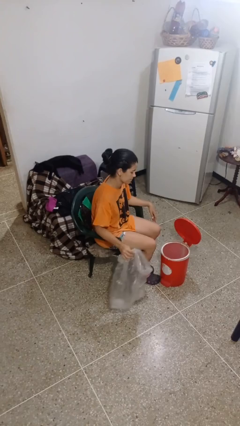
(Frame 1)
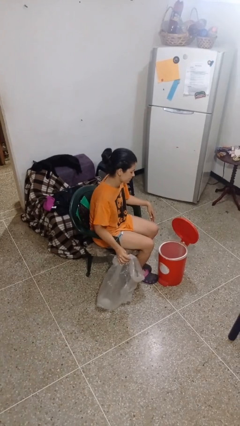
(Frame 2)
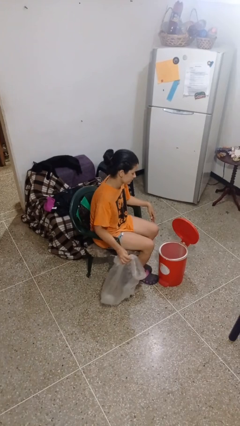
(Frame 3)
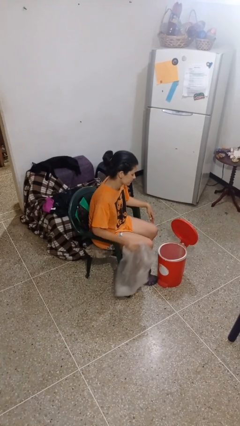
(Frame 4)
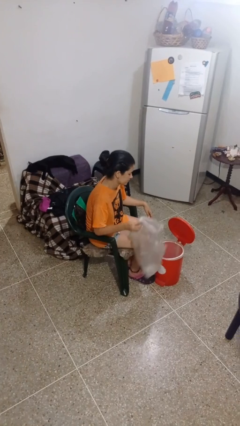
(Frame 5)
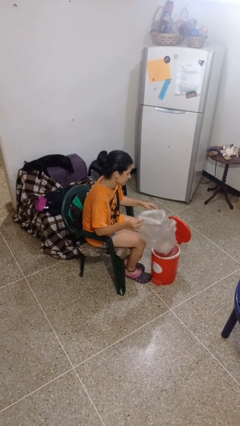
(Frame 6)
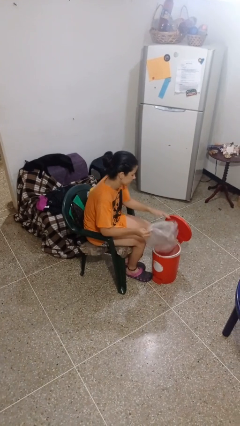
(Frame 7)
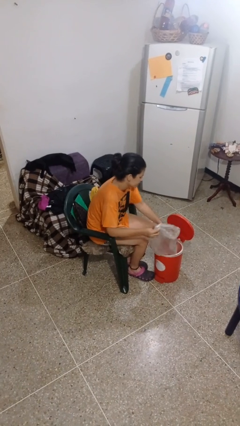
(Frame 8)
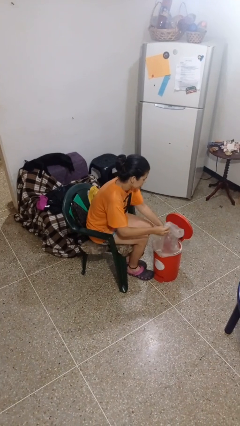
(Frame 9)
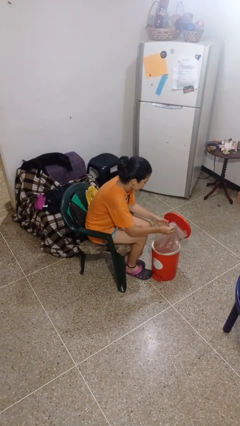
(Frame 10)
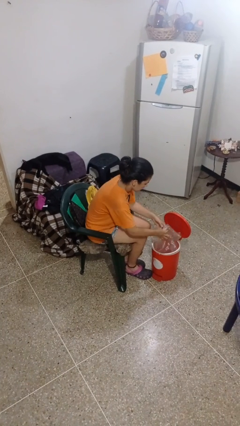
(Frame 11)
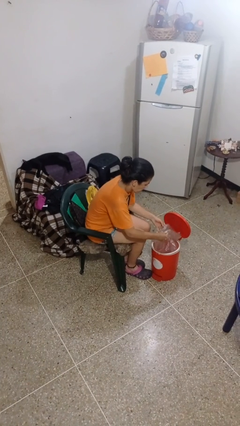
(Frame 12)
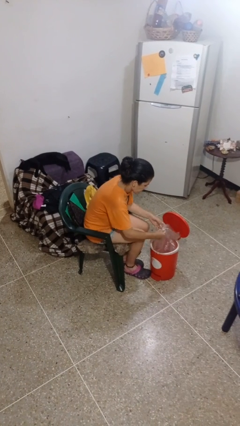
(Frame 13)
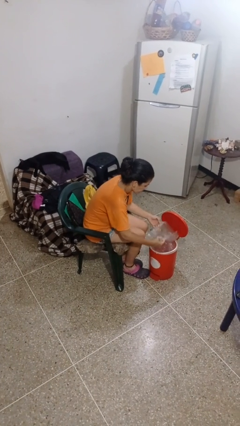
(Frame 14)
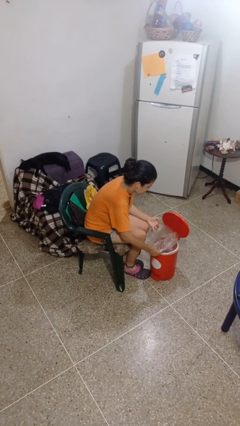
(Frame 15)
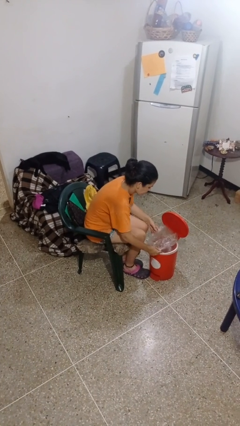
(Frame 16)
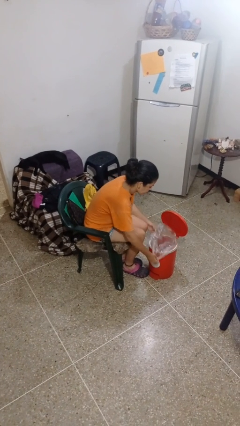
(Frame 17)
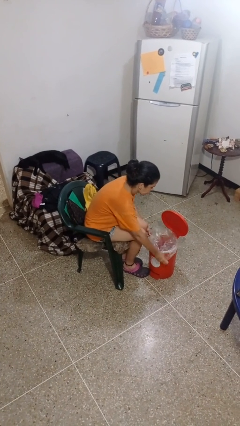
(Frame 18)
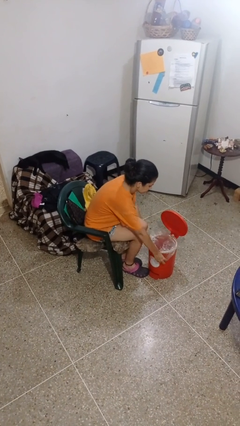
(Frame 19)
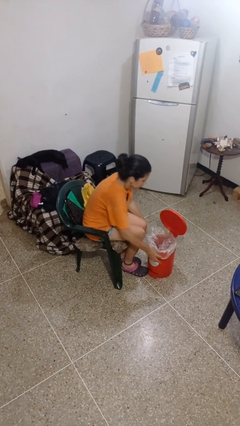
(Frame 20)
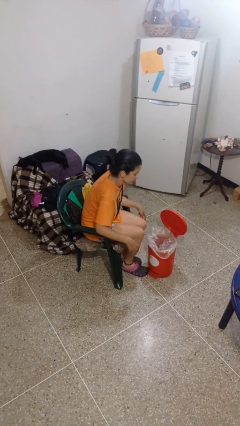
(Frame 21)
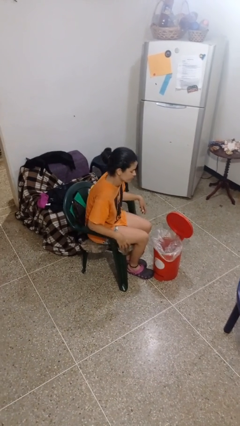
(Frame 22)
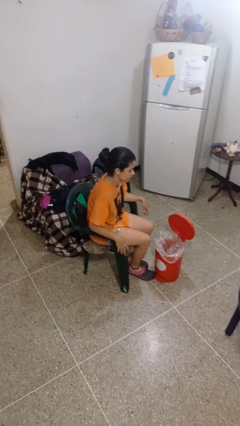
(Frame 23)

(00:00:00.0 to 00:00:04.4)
person inserts trashbag into trashcan

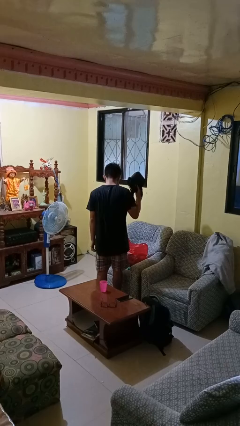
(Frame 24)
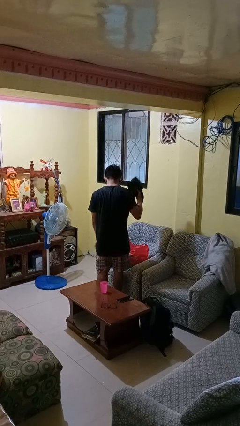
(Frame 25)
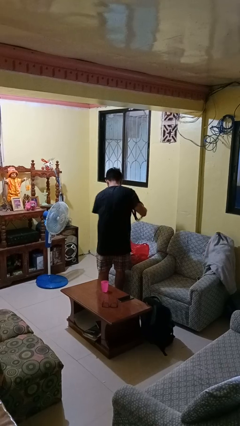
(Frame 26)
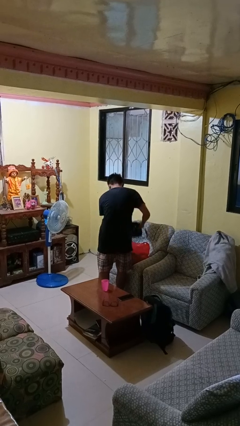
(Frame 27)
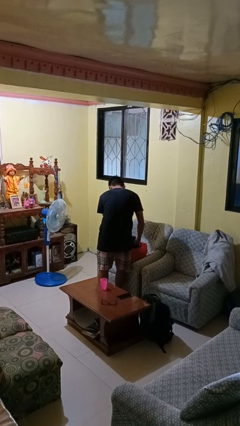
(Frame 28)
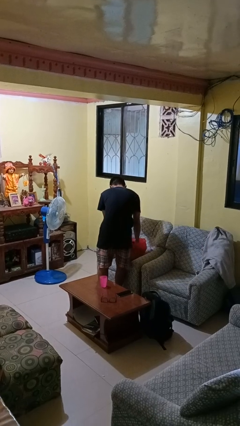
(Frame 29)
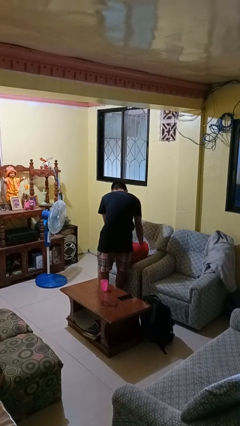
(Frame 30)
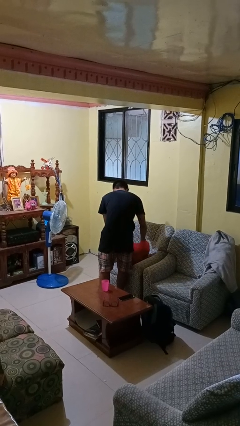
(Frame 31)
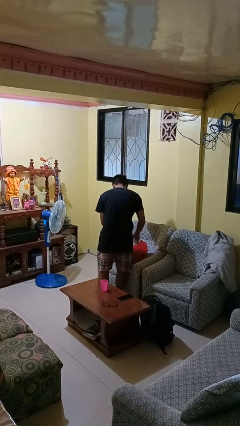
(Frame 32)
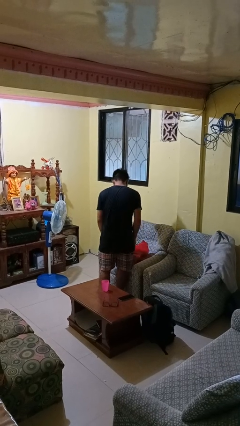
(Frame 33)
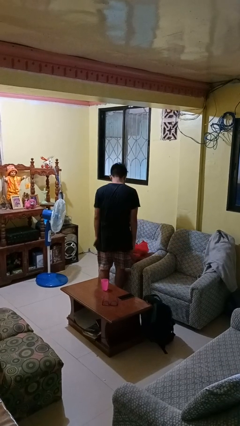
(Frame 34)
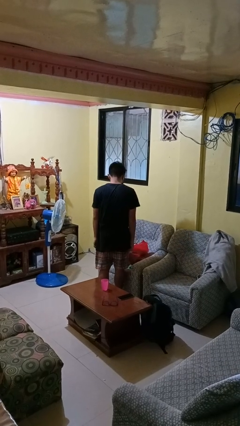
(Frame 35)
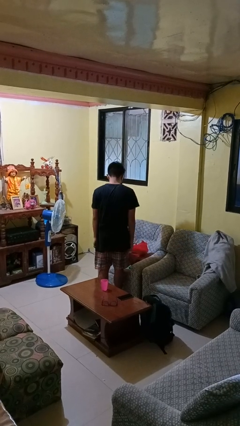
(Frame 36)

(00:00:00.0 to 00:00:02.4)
person puts object into bag

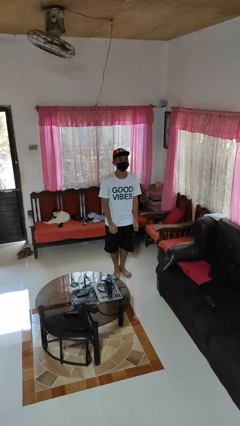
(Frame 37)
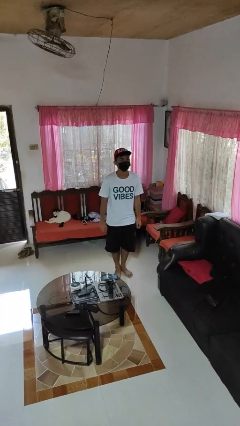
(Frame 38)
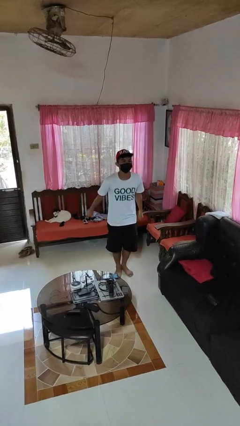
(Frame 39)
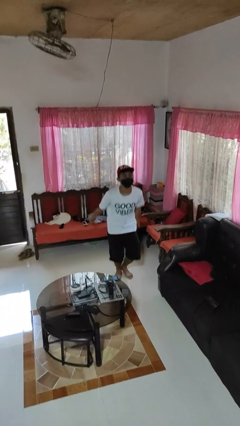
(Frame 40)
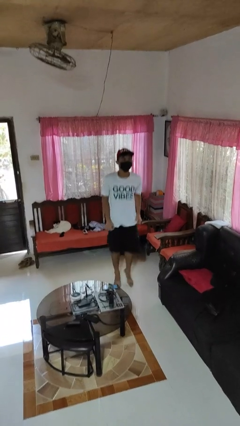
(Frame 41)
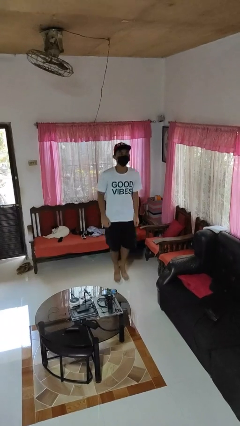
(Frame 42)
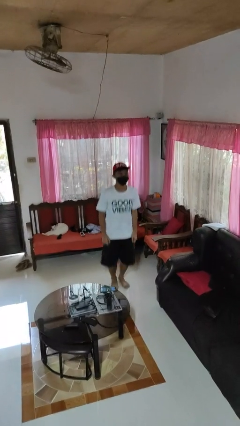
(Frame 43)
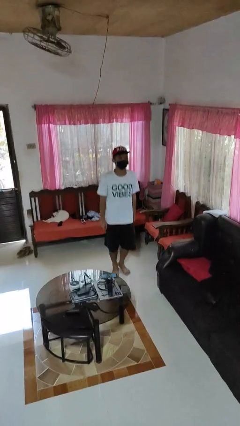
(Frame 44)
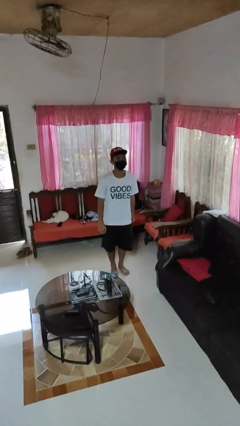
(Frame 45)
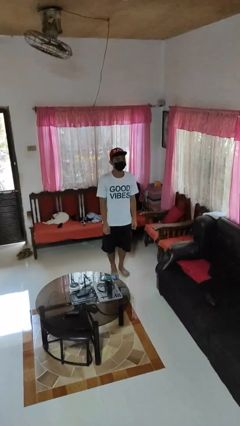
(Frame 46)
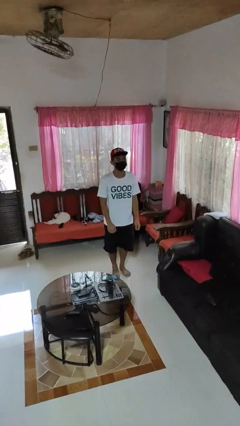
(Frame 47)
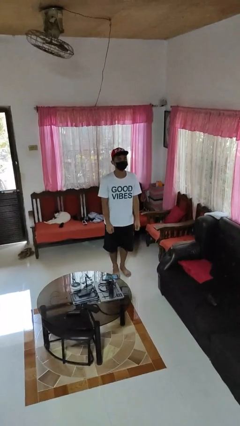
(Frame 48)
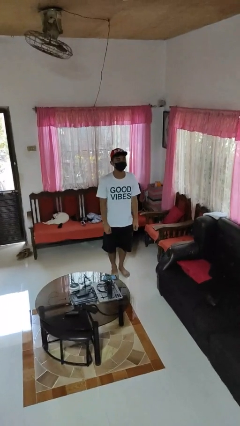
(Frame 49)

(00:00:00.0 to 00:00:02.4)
person jumps

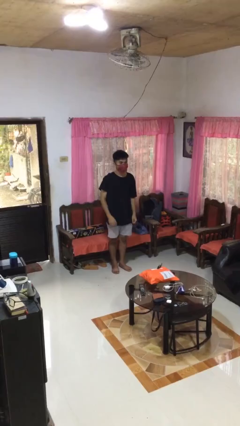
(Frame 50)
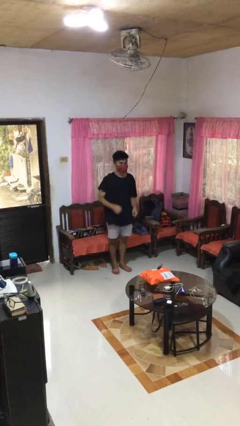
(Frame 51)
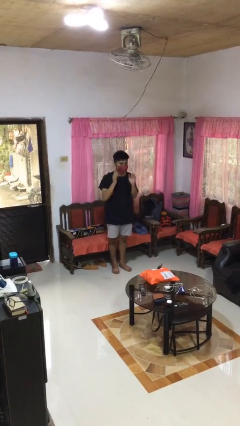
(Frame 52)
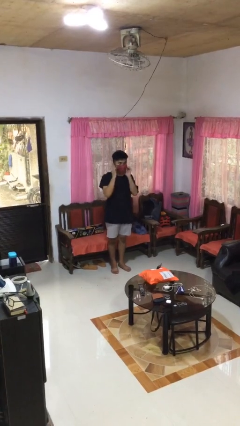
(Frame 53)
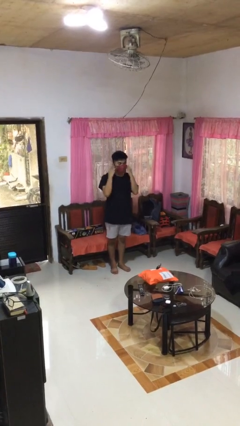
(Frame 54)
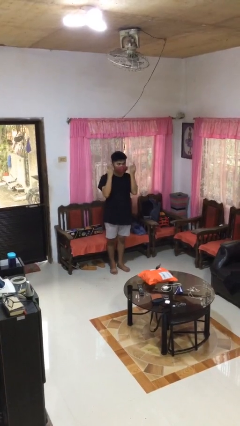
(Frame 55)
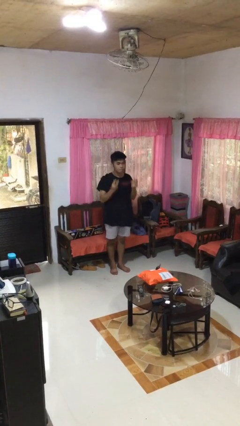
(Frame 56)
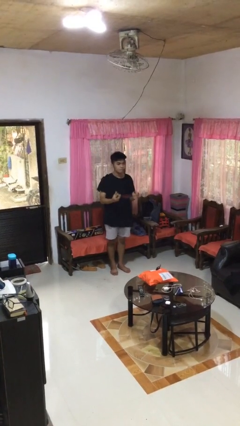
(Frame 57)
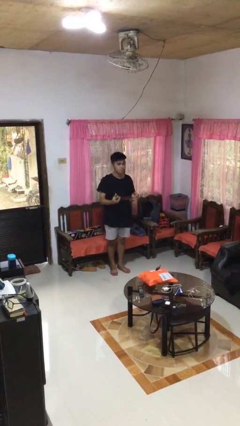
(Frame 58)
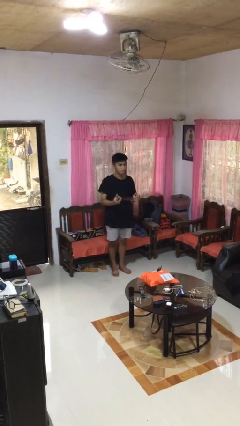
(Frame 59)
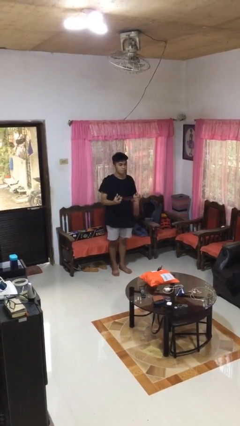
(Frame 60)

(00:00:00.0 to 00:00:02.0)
person takes off facemask

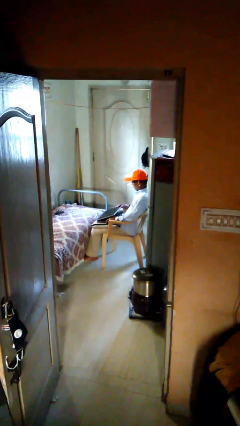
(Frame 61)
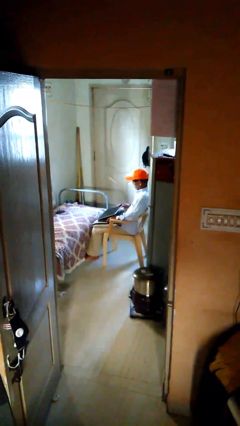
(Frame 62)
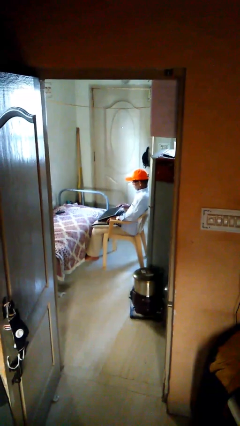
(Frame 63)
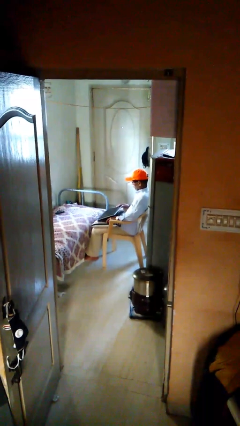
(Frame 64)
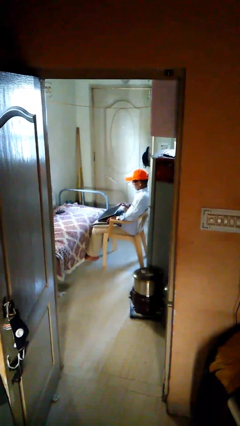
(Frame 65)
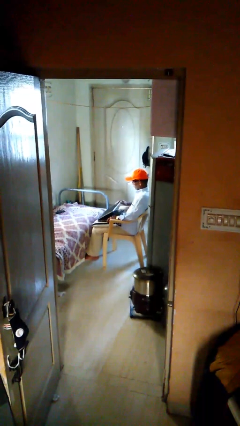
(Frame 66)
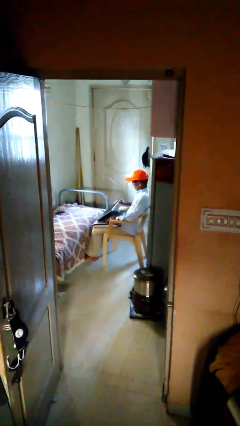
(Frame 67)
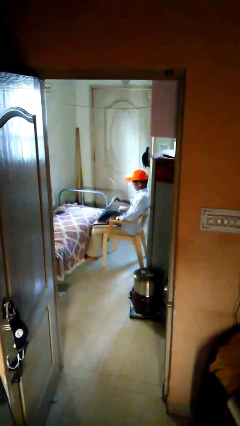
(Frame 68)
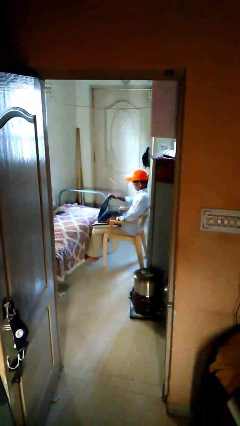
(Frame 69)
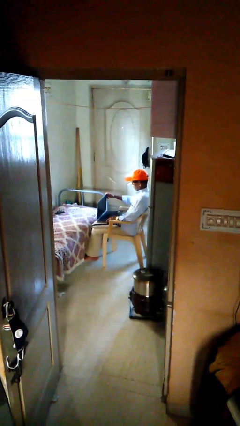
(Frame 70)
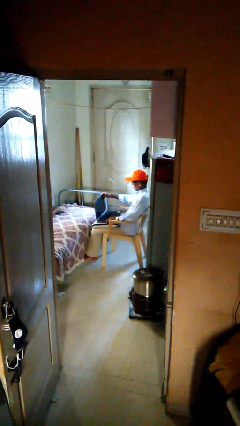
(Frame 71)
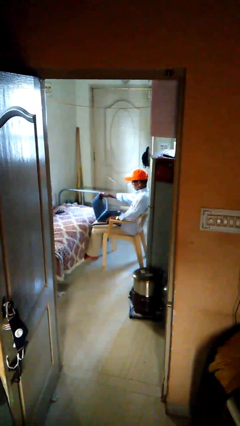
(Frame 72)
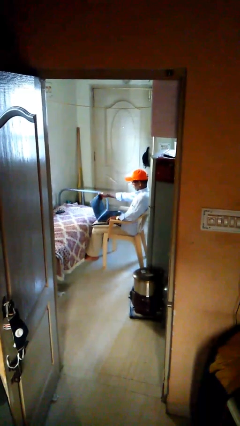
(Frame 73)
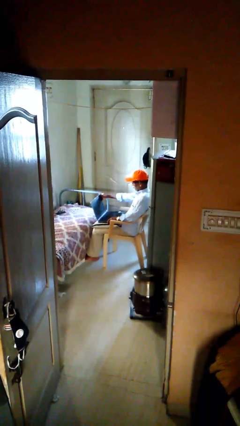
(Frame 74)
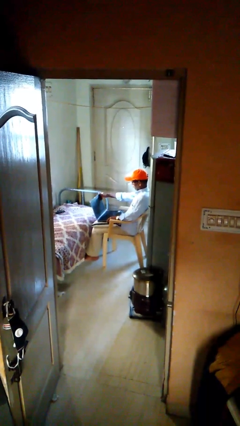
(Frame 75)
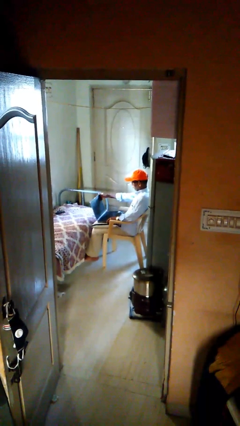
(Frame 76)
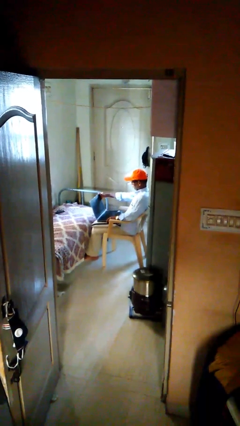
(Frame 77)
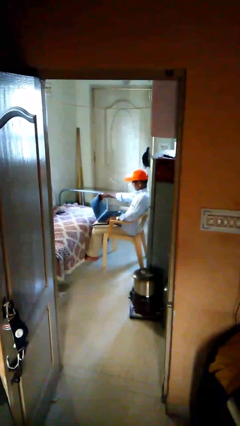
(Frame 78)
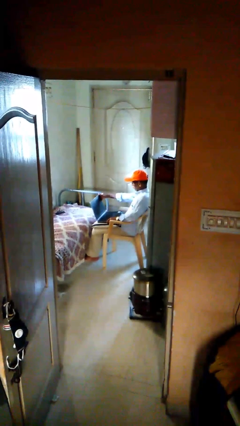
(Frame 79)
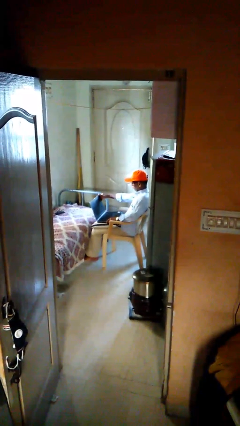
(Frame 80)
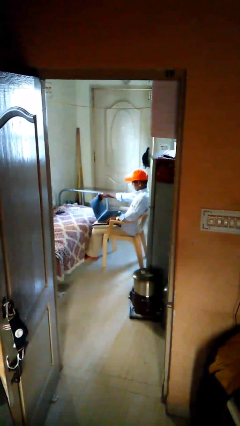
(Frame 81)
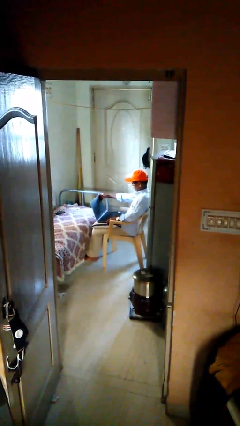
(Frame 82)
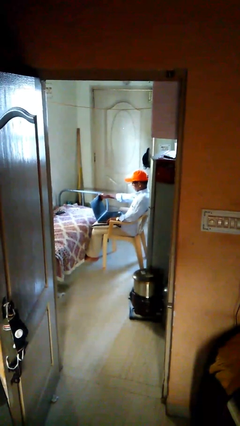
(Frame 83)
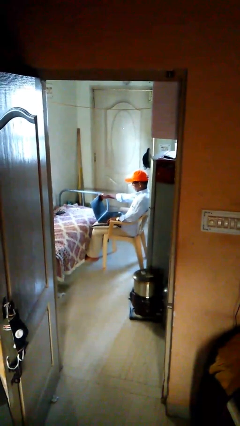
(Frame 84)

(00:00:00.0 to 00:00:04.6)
person interacts with laptop

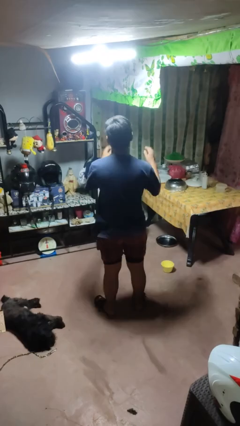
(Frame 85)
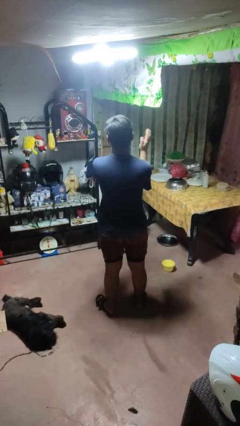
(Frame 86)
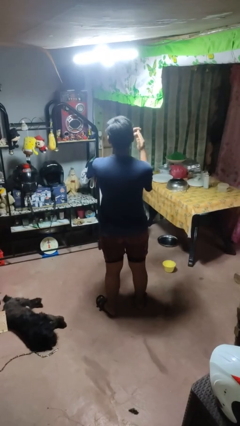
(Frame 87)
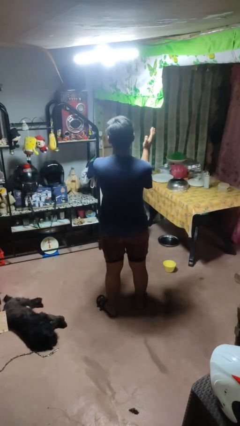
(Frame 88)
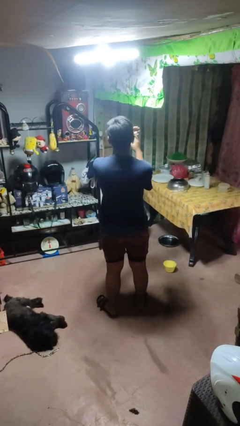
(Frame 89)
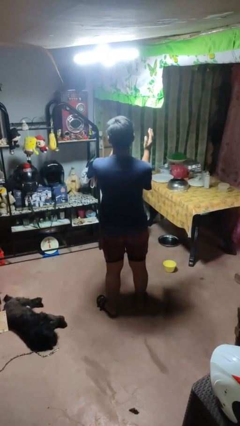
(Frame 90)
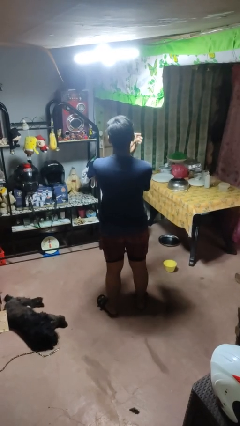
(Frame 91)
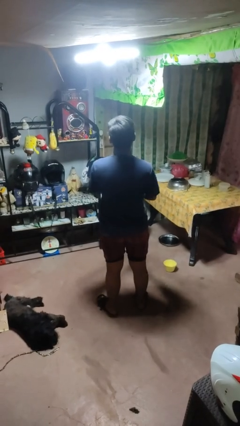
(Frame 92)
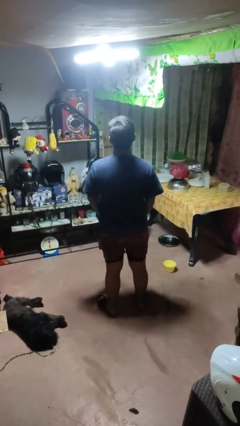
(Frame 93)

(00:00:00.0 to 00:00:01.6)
person claps hands
